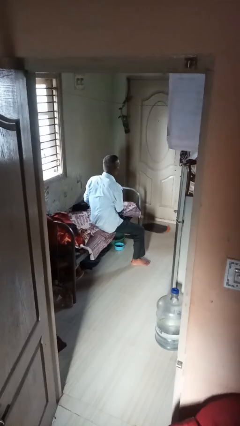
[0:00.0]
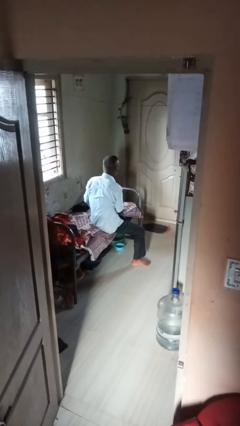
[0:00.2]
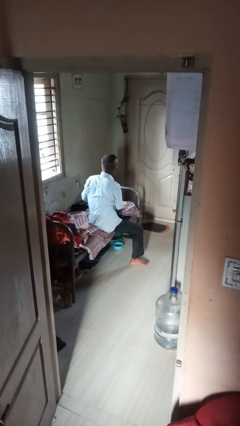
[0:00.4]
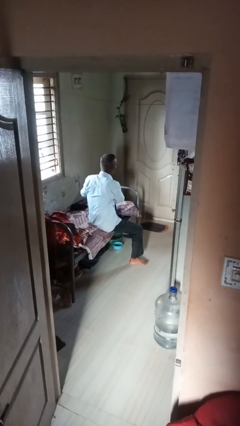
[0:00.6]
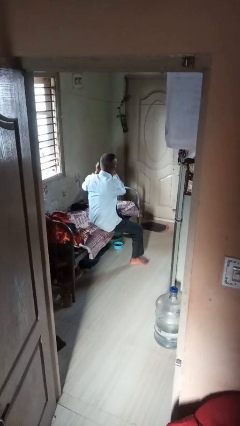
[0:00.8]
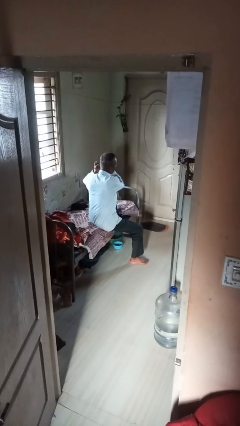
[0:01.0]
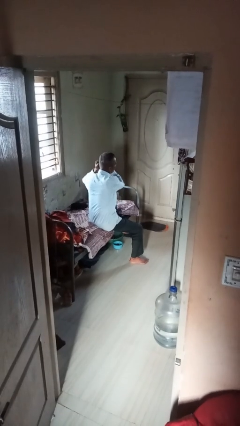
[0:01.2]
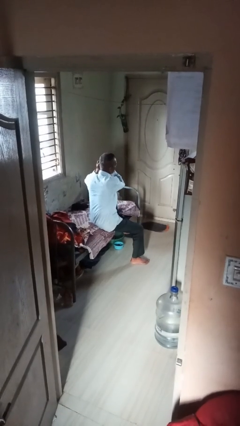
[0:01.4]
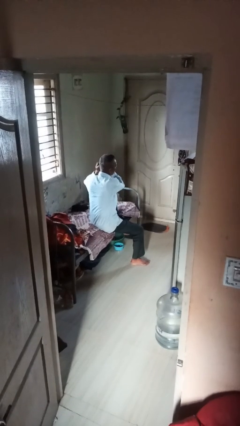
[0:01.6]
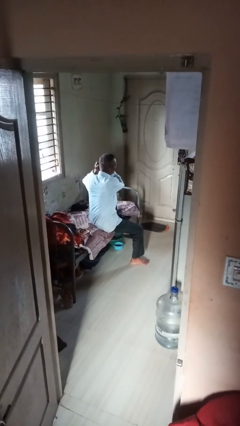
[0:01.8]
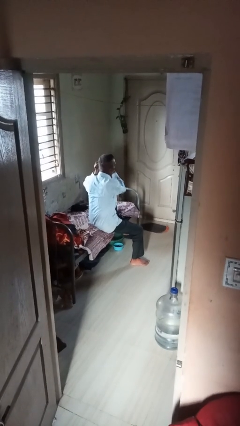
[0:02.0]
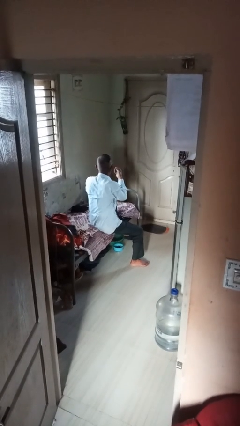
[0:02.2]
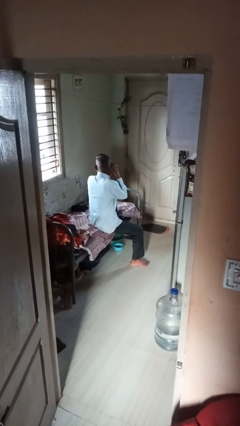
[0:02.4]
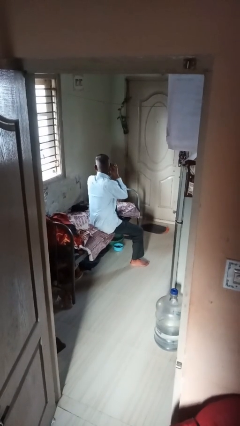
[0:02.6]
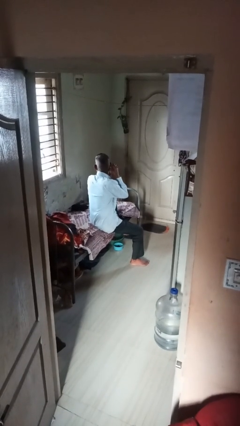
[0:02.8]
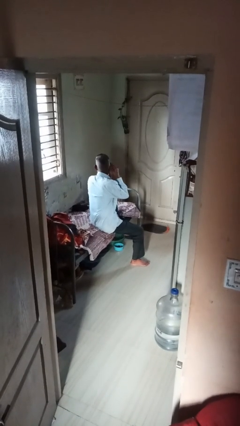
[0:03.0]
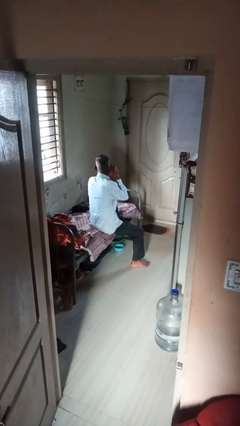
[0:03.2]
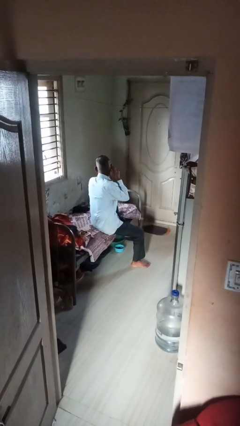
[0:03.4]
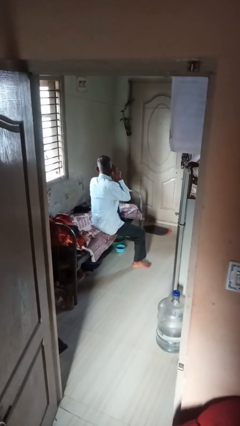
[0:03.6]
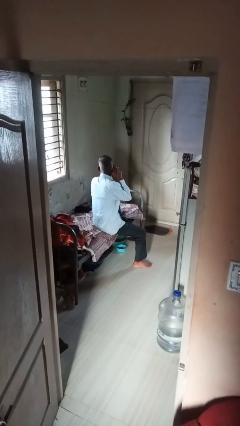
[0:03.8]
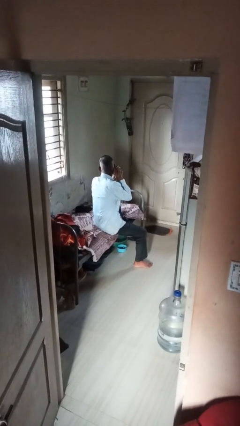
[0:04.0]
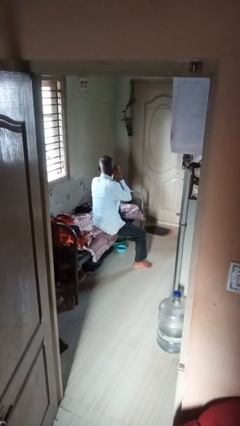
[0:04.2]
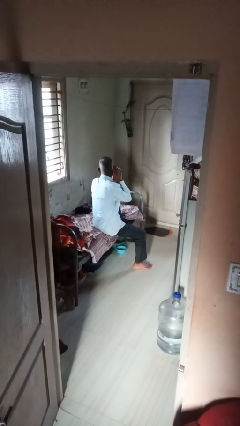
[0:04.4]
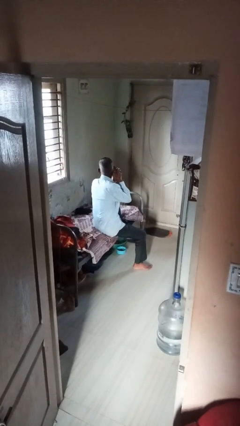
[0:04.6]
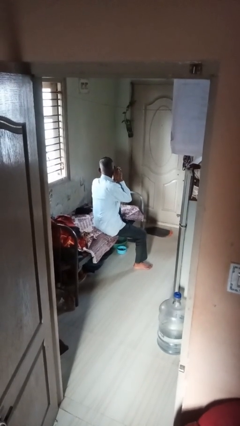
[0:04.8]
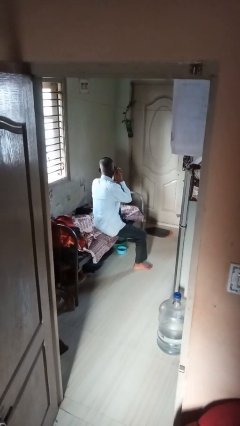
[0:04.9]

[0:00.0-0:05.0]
person puts on earrings

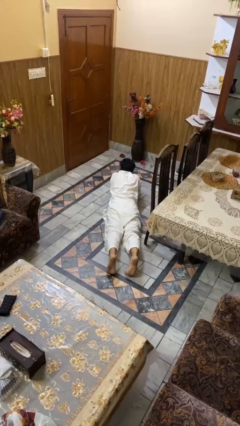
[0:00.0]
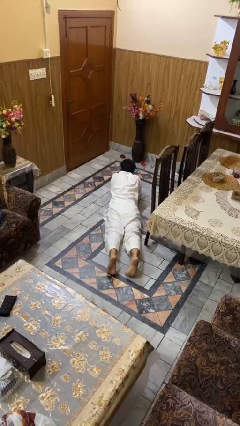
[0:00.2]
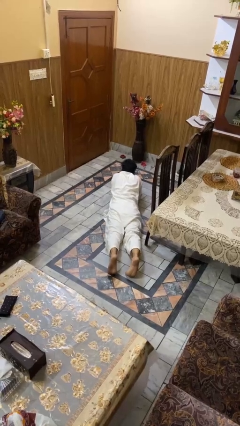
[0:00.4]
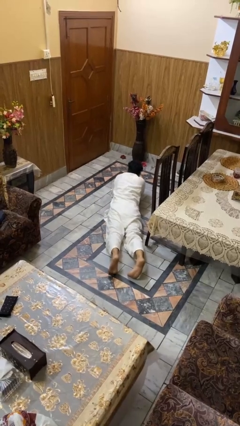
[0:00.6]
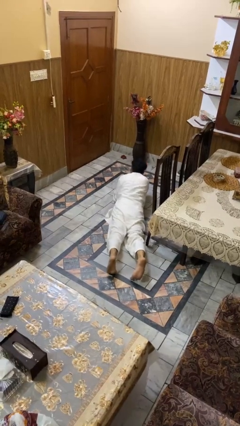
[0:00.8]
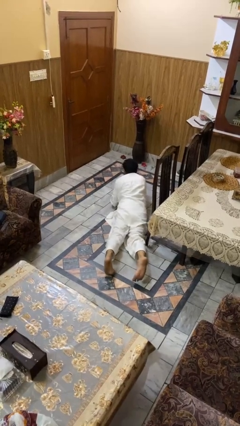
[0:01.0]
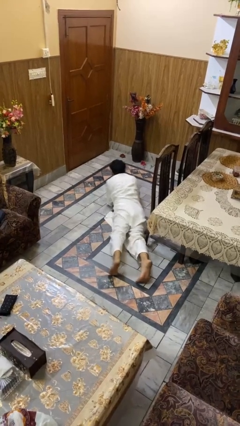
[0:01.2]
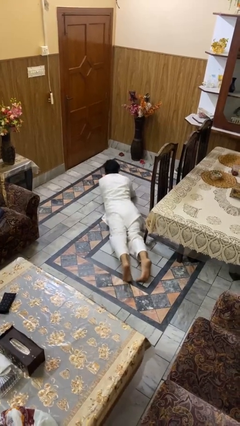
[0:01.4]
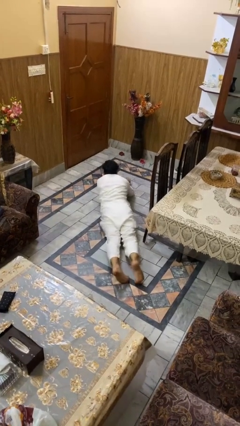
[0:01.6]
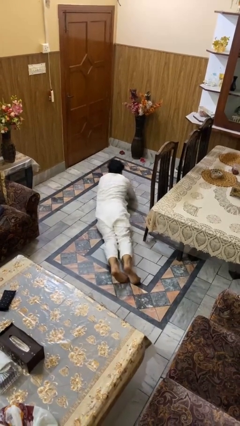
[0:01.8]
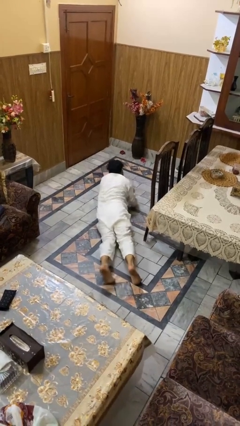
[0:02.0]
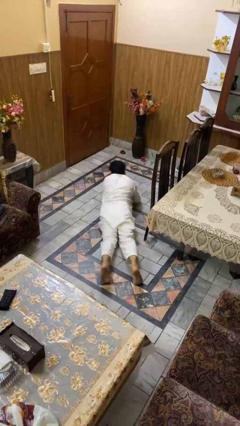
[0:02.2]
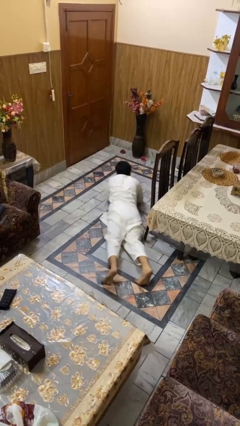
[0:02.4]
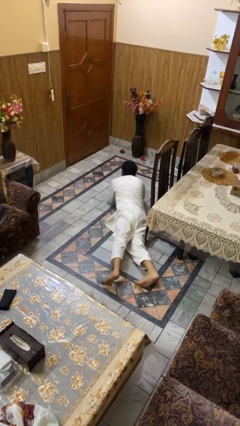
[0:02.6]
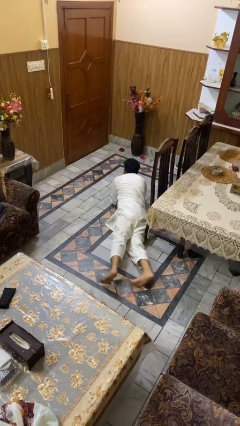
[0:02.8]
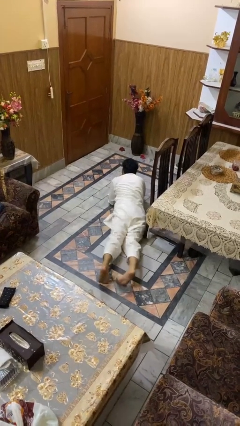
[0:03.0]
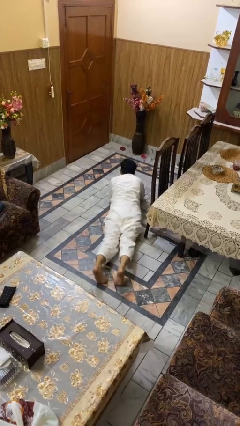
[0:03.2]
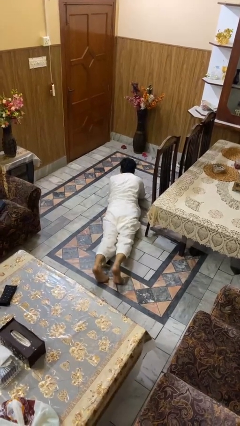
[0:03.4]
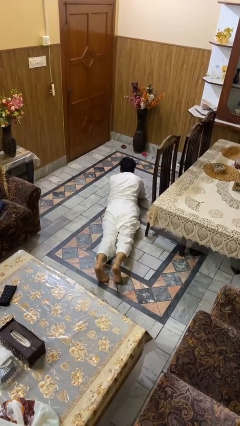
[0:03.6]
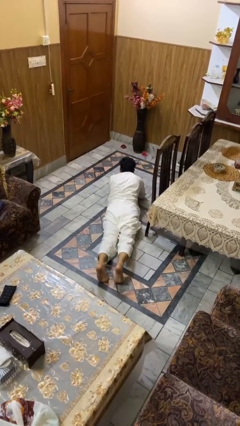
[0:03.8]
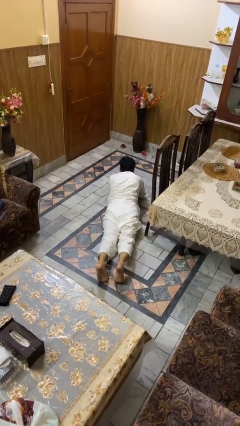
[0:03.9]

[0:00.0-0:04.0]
person crawls

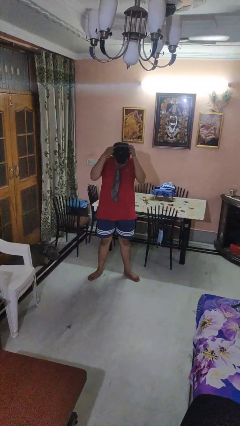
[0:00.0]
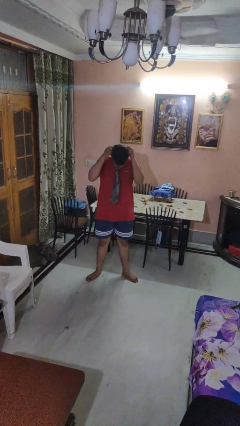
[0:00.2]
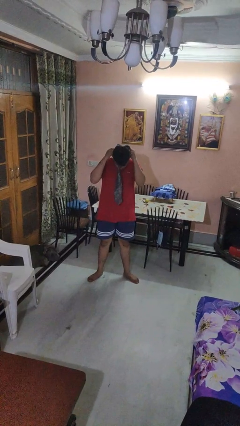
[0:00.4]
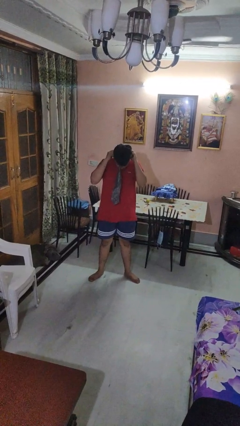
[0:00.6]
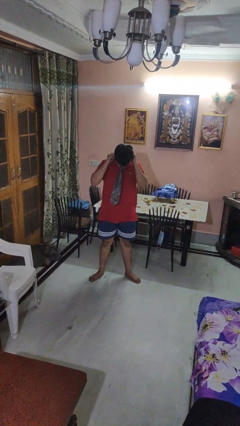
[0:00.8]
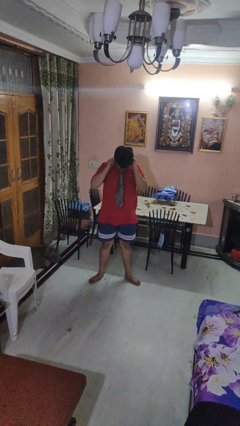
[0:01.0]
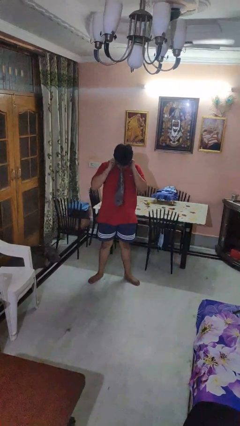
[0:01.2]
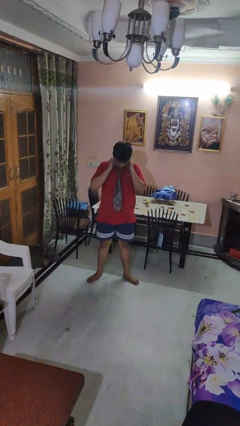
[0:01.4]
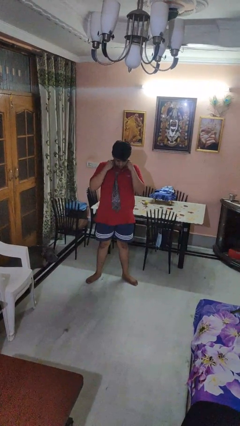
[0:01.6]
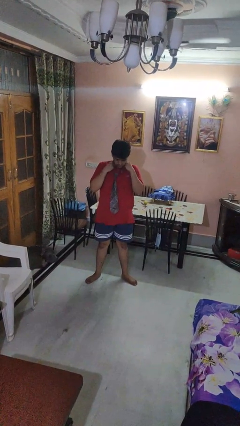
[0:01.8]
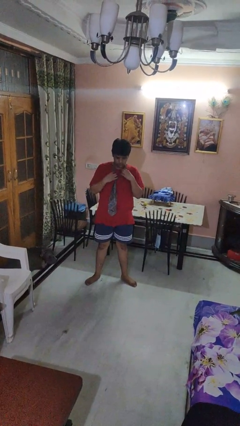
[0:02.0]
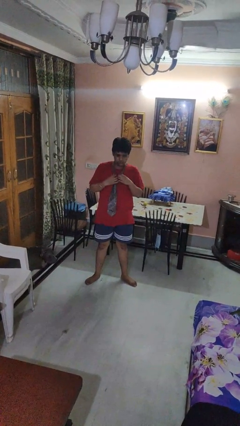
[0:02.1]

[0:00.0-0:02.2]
person puts on necktie

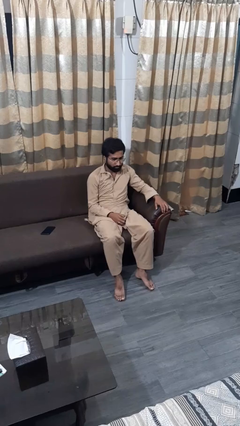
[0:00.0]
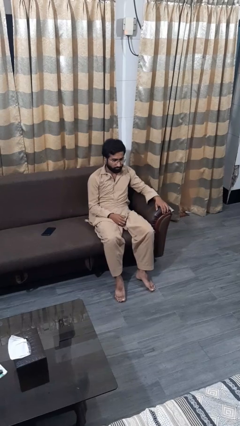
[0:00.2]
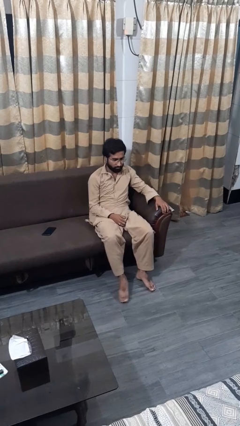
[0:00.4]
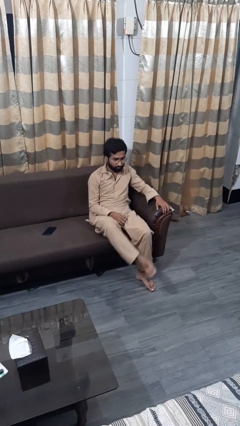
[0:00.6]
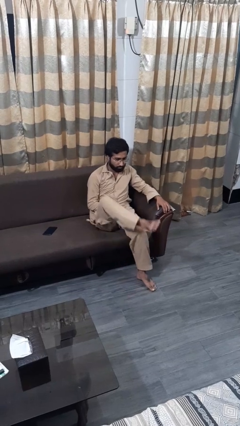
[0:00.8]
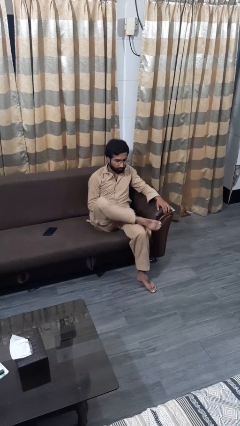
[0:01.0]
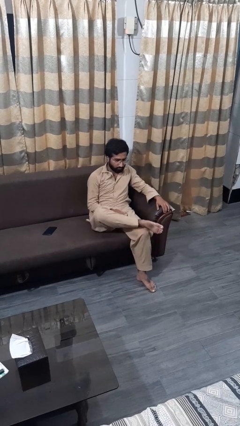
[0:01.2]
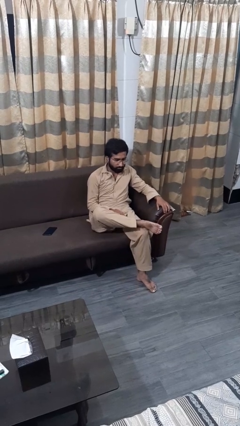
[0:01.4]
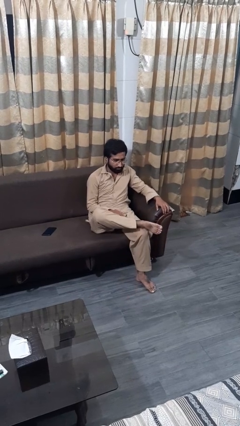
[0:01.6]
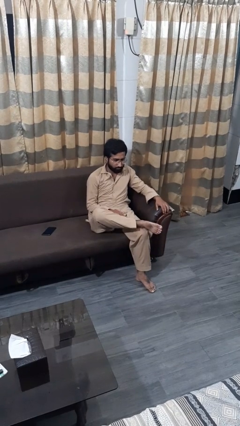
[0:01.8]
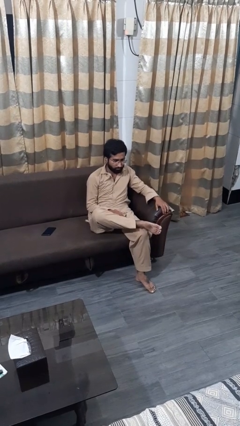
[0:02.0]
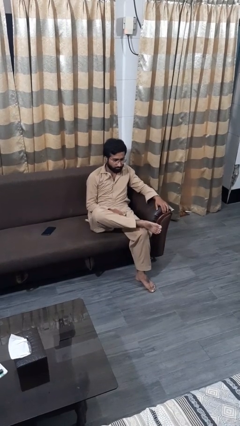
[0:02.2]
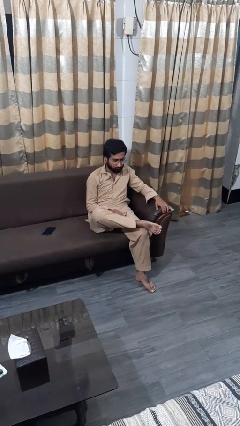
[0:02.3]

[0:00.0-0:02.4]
person crosses legs

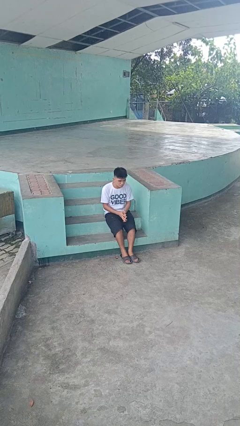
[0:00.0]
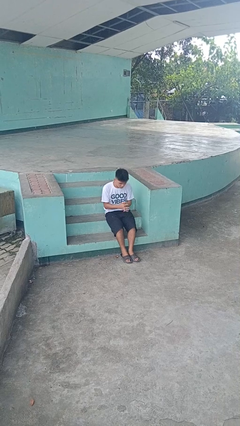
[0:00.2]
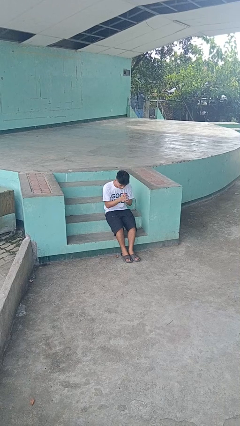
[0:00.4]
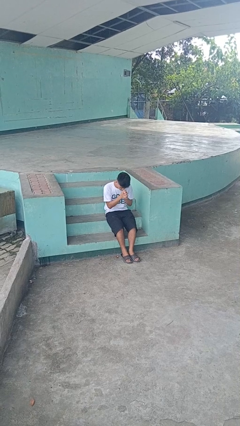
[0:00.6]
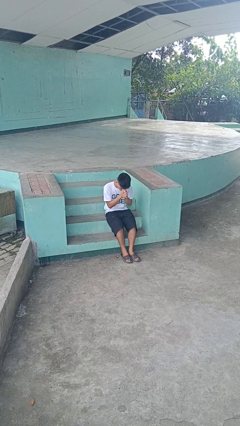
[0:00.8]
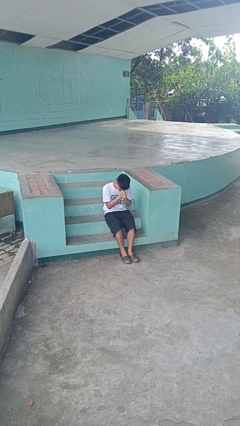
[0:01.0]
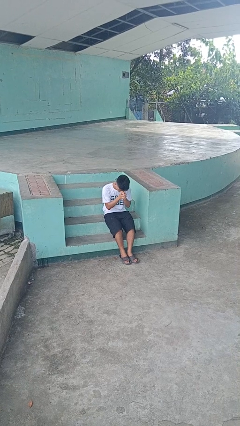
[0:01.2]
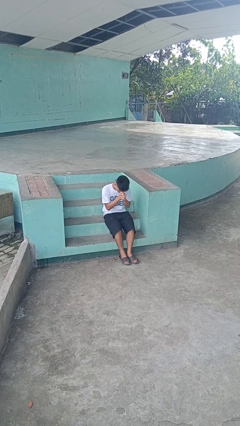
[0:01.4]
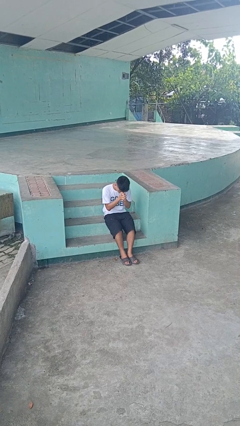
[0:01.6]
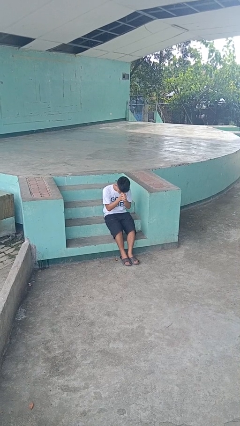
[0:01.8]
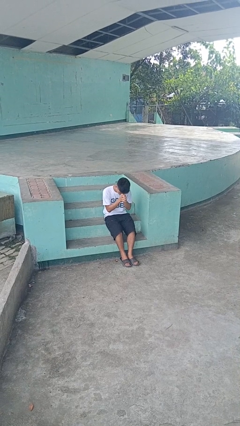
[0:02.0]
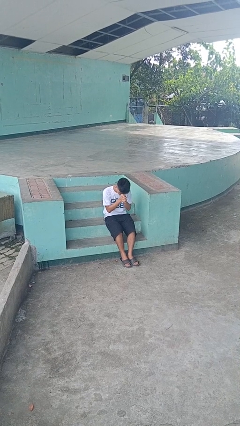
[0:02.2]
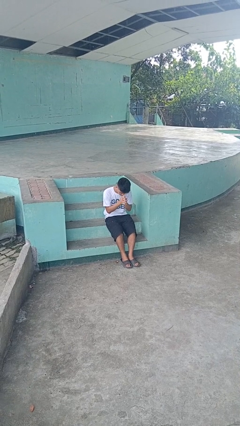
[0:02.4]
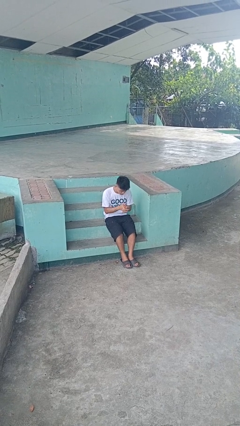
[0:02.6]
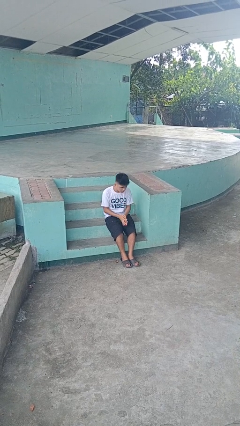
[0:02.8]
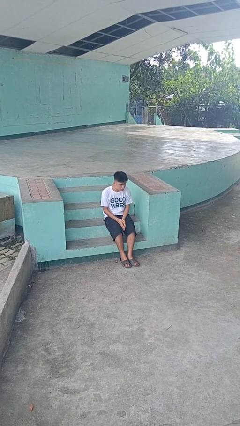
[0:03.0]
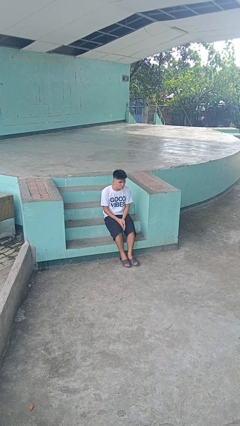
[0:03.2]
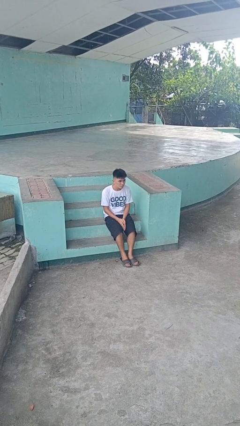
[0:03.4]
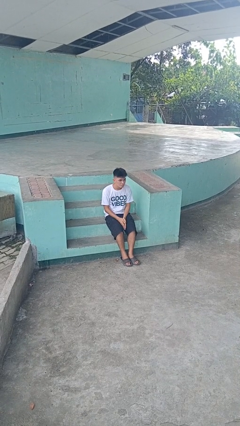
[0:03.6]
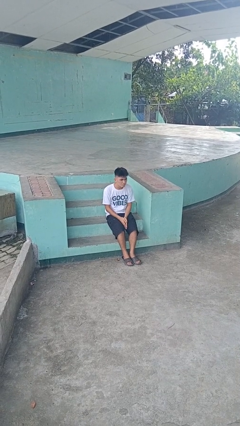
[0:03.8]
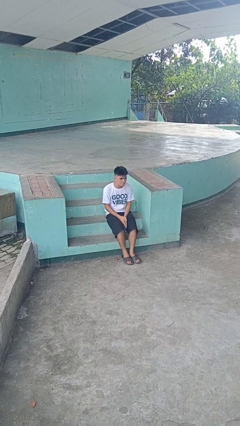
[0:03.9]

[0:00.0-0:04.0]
person prays
